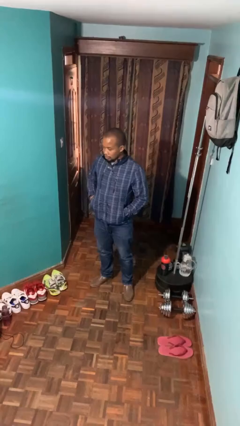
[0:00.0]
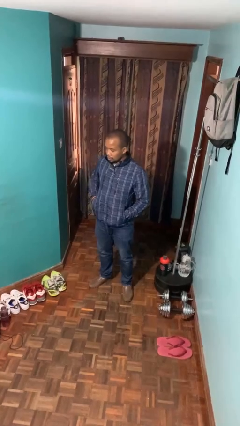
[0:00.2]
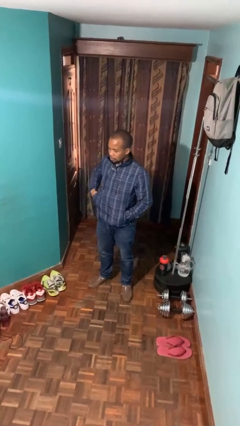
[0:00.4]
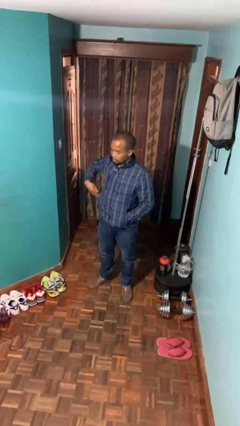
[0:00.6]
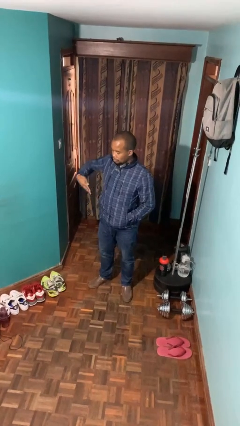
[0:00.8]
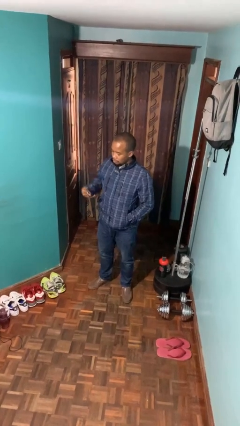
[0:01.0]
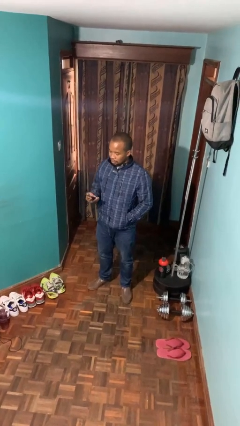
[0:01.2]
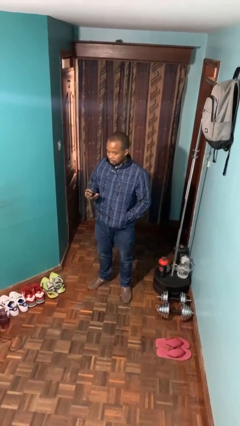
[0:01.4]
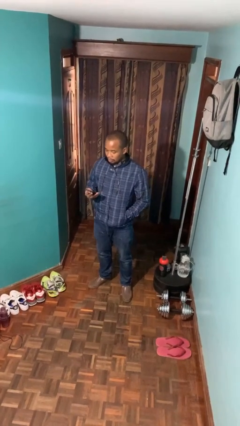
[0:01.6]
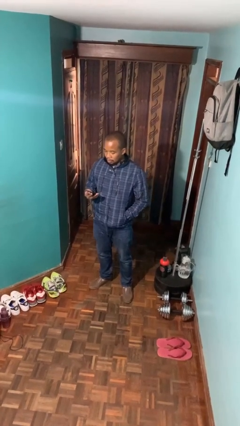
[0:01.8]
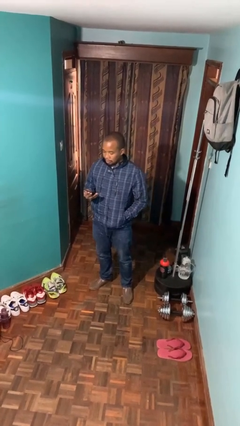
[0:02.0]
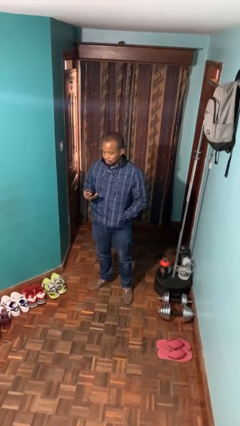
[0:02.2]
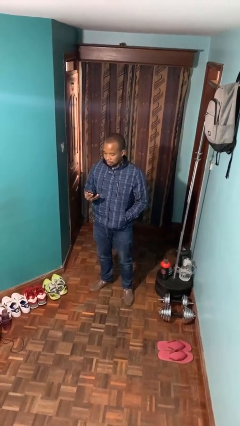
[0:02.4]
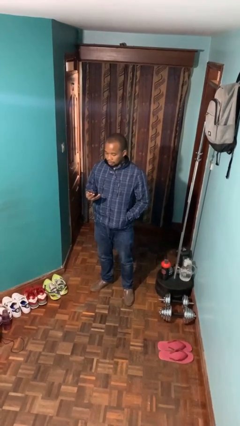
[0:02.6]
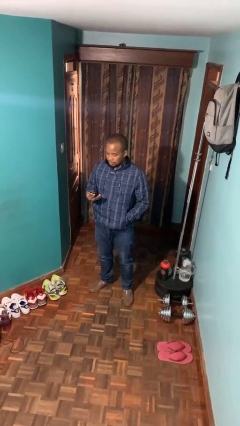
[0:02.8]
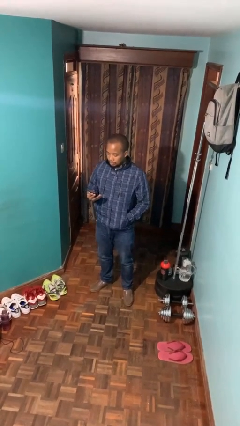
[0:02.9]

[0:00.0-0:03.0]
person takes phone from pocket

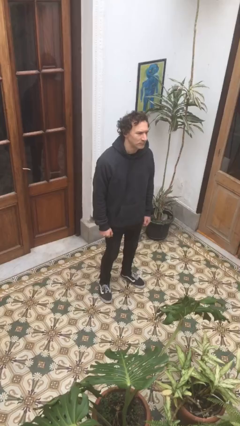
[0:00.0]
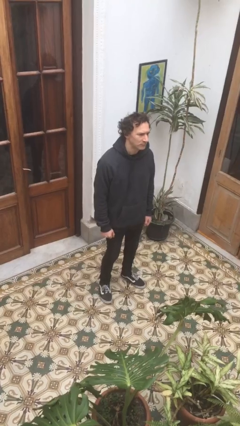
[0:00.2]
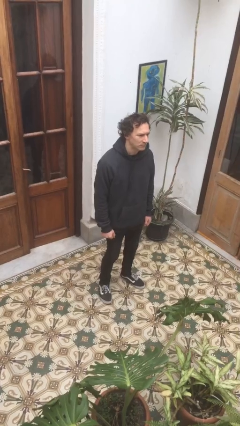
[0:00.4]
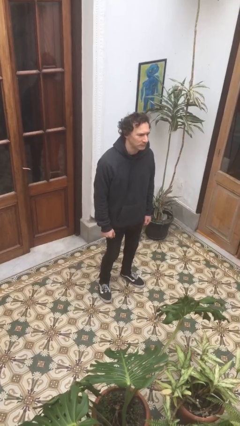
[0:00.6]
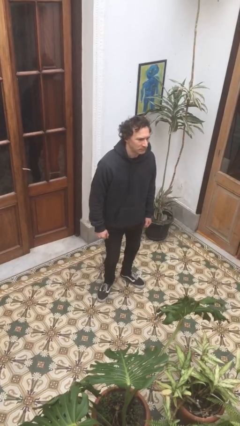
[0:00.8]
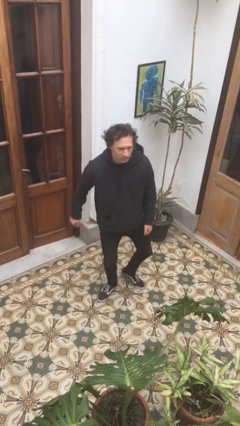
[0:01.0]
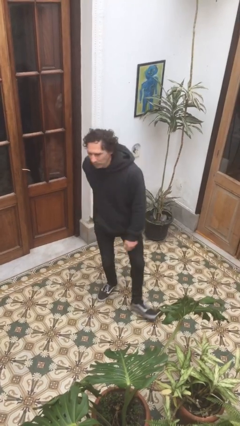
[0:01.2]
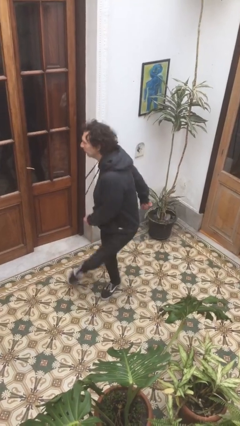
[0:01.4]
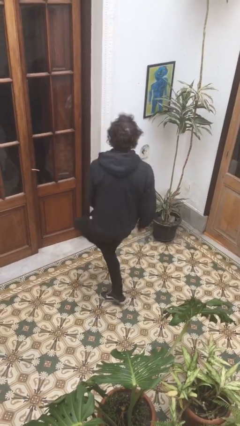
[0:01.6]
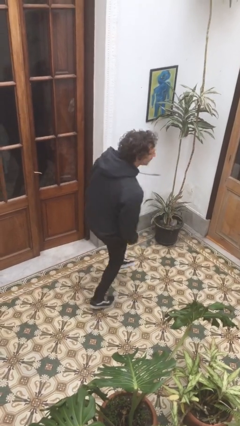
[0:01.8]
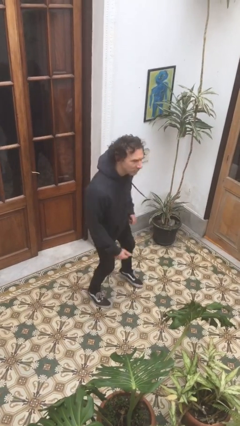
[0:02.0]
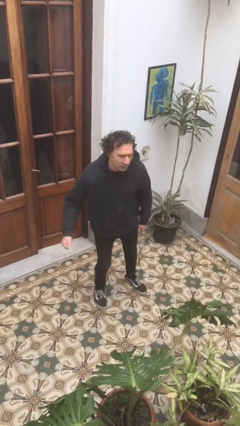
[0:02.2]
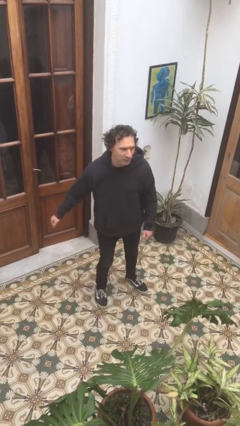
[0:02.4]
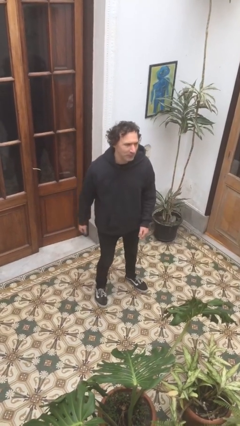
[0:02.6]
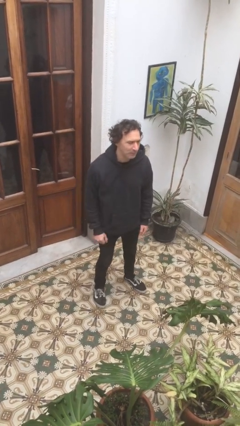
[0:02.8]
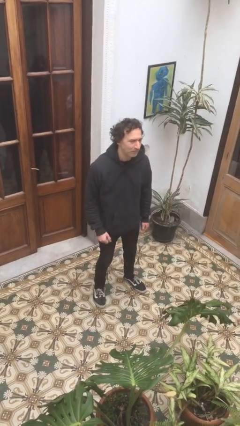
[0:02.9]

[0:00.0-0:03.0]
person twirls

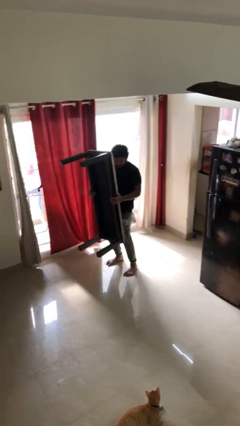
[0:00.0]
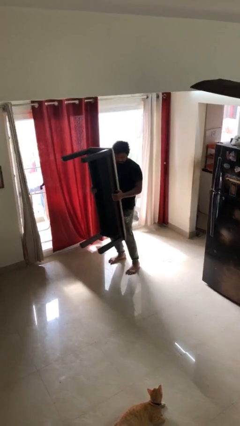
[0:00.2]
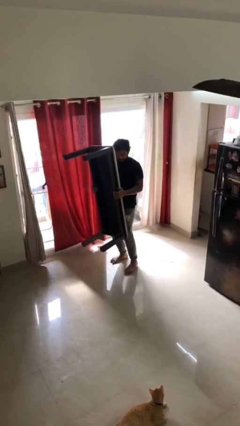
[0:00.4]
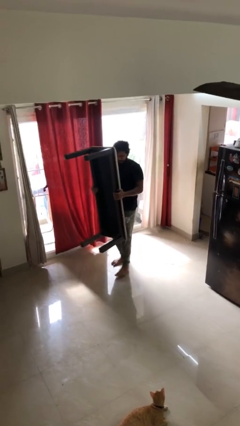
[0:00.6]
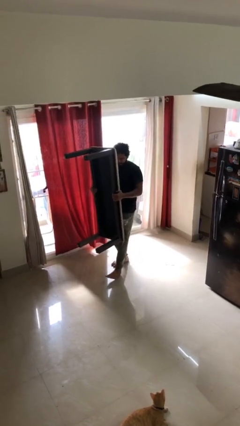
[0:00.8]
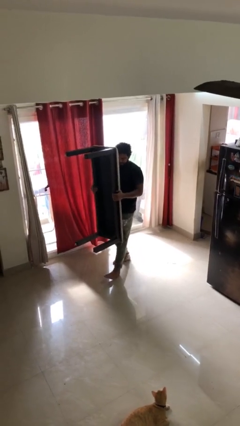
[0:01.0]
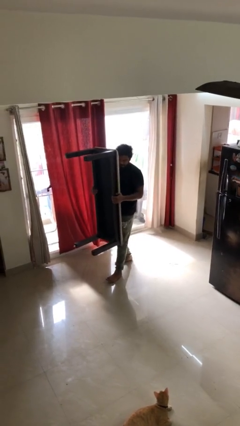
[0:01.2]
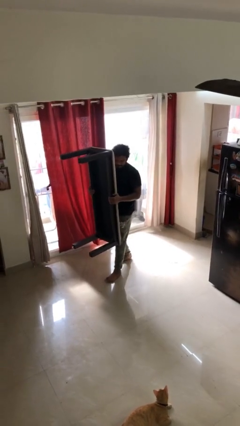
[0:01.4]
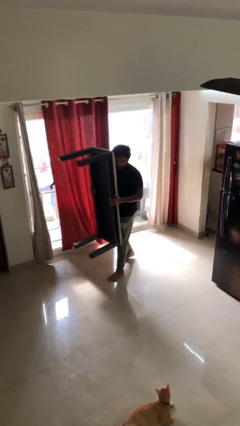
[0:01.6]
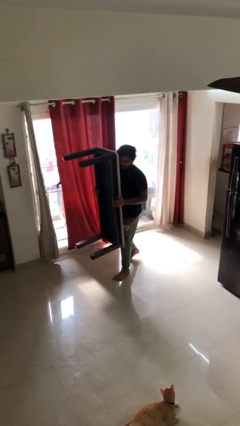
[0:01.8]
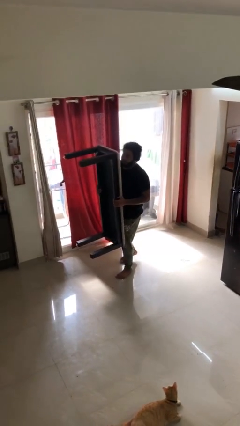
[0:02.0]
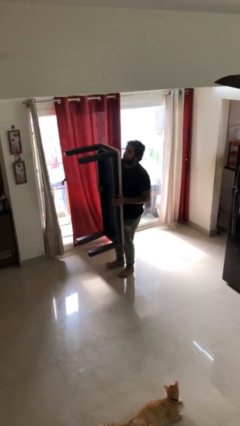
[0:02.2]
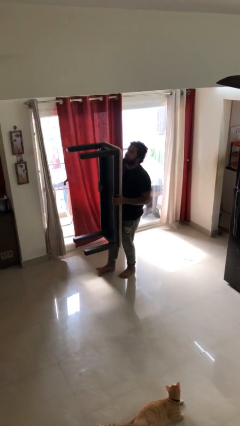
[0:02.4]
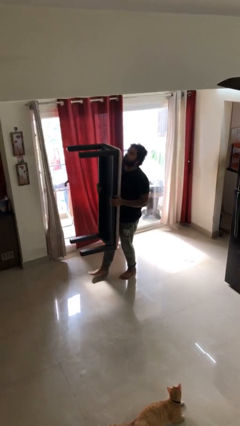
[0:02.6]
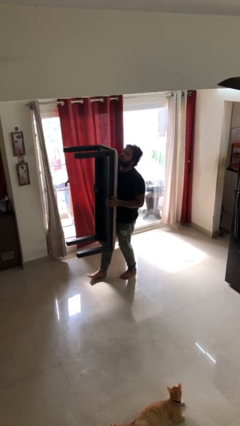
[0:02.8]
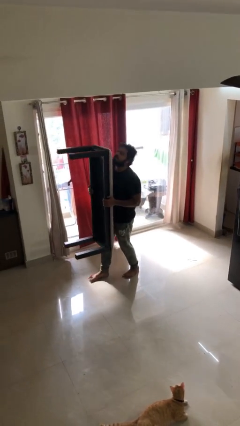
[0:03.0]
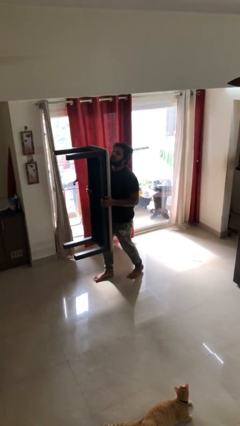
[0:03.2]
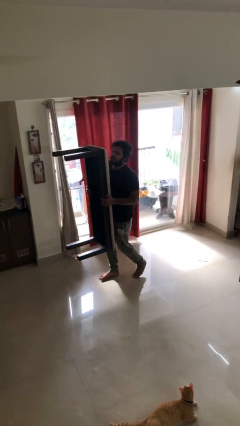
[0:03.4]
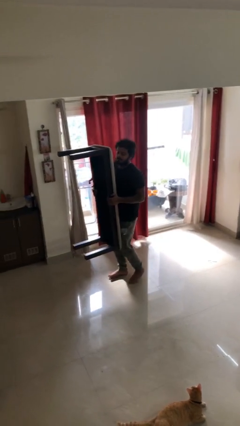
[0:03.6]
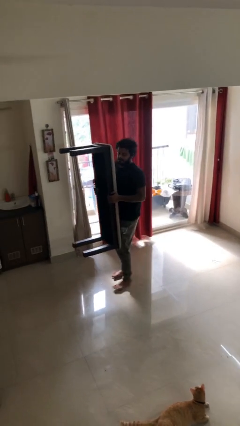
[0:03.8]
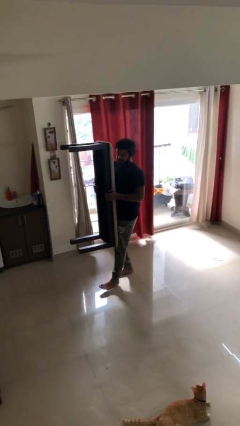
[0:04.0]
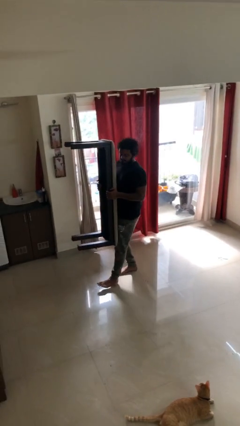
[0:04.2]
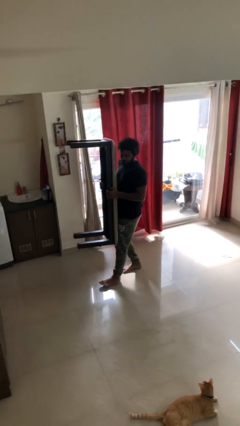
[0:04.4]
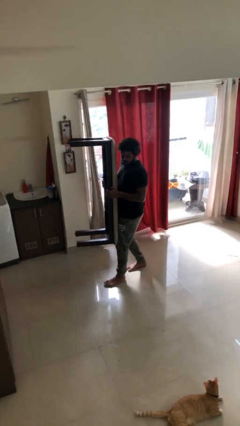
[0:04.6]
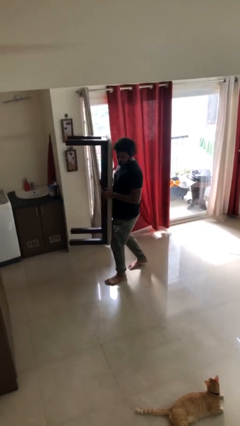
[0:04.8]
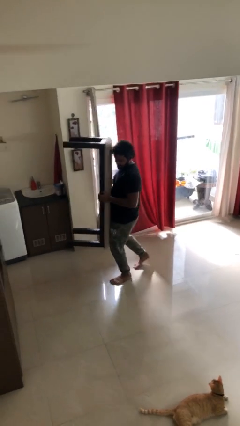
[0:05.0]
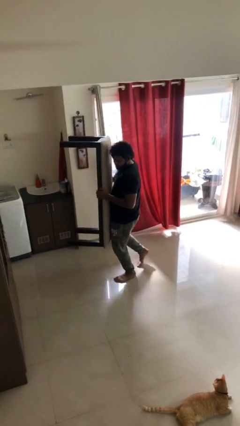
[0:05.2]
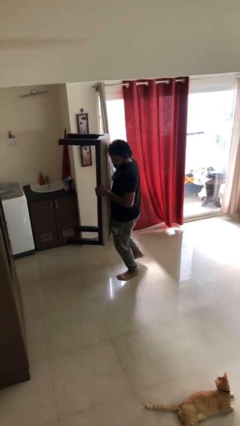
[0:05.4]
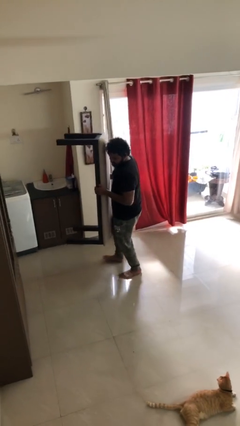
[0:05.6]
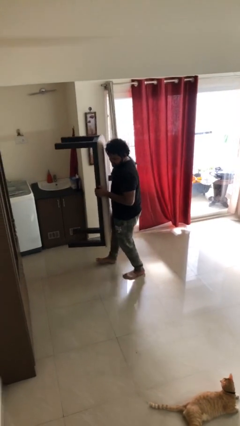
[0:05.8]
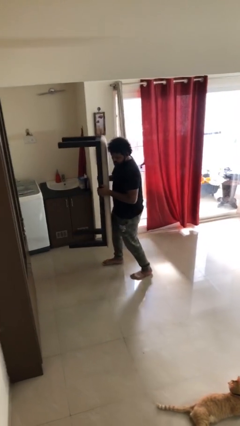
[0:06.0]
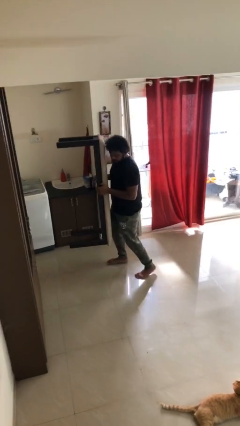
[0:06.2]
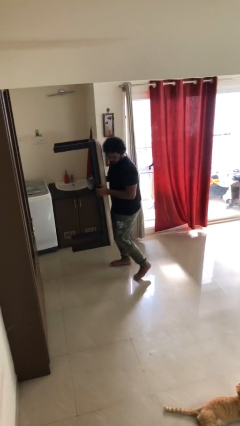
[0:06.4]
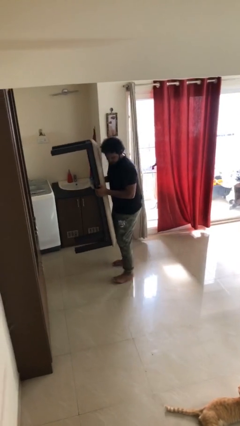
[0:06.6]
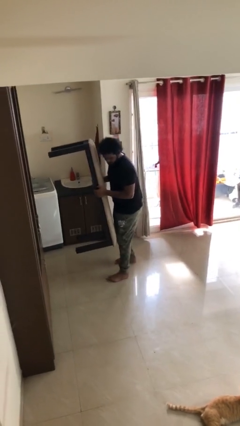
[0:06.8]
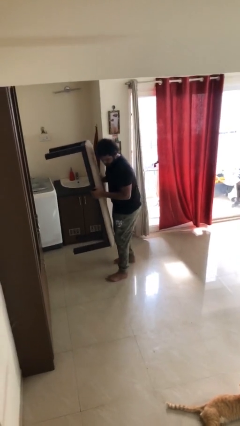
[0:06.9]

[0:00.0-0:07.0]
person carries heavy object

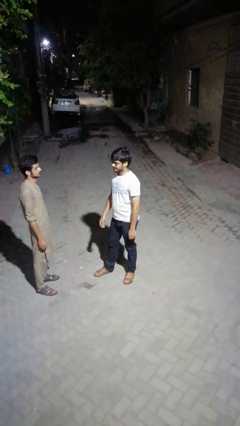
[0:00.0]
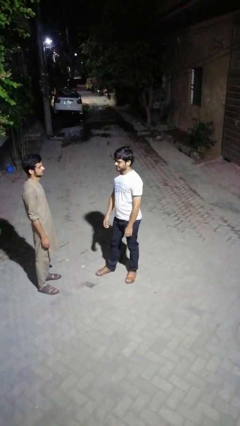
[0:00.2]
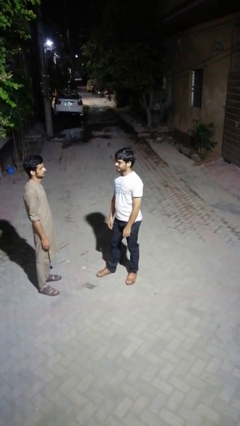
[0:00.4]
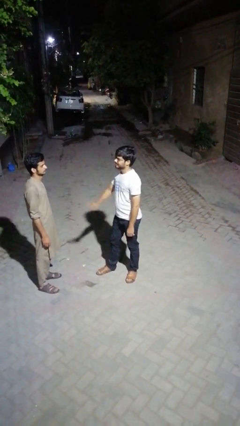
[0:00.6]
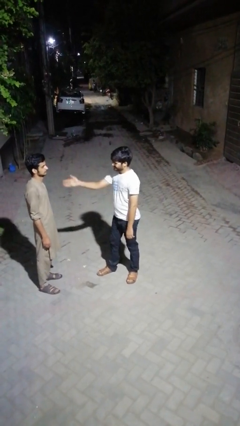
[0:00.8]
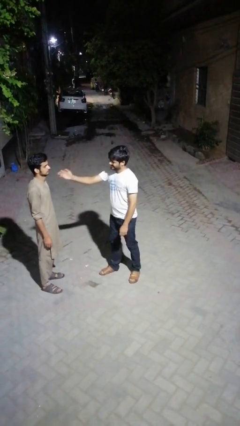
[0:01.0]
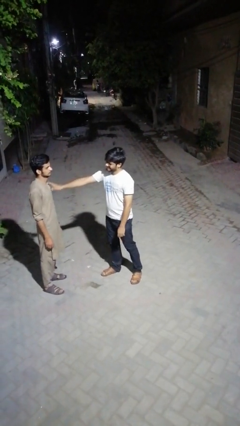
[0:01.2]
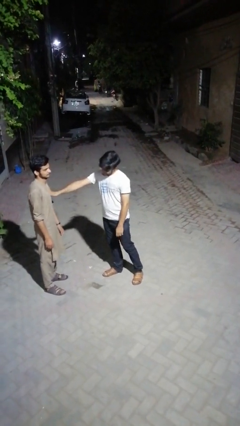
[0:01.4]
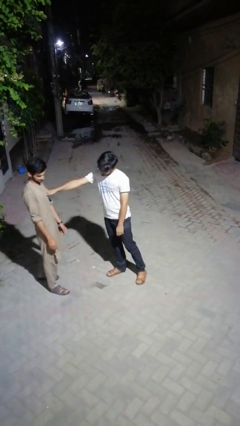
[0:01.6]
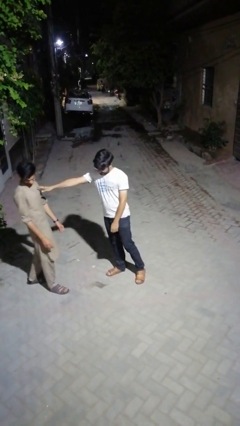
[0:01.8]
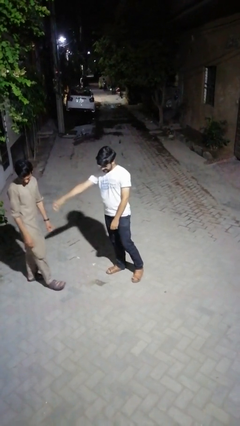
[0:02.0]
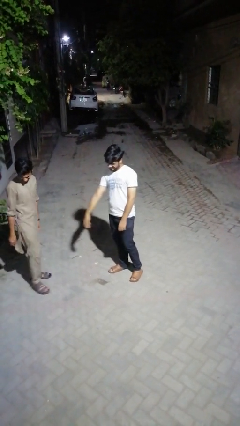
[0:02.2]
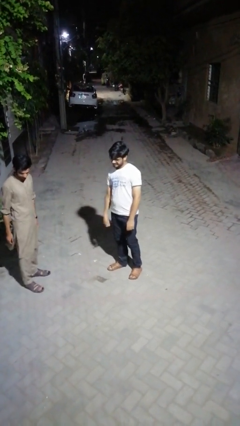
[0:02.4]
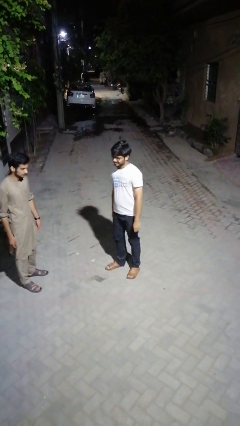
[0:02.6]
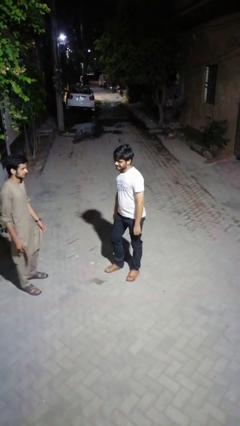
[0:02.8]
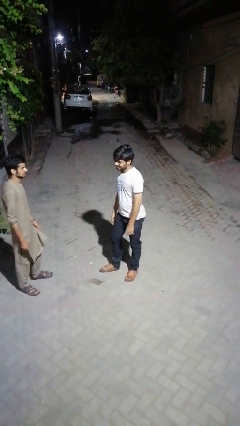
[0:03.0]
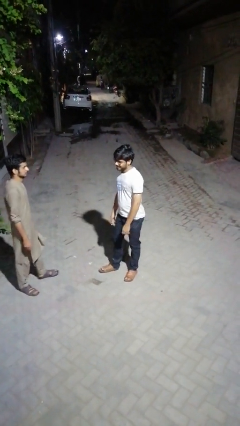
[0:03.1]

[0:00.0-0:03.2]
person shoves person

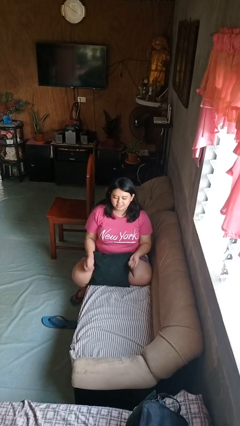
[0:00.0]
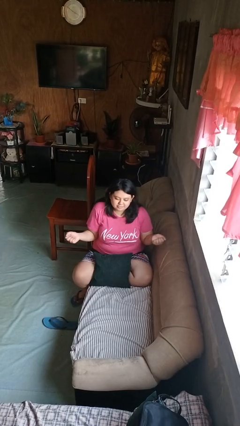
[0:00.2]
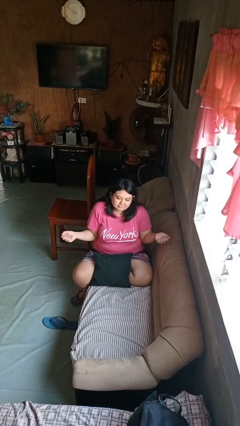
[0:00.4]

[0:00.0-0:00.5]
person shrugs

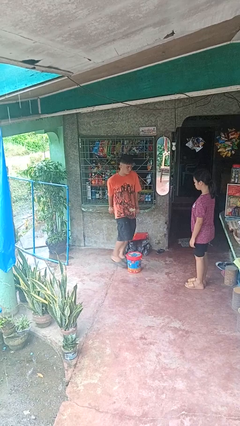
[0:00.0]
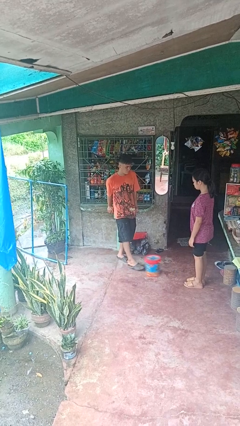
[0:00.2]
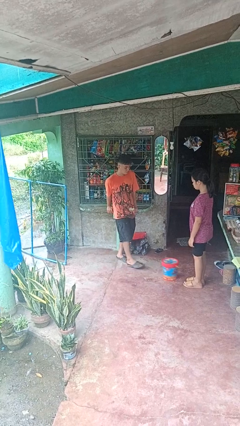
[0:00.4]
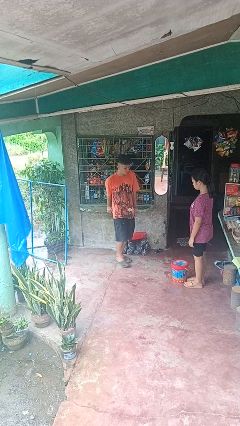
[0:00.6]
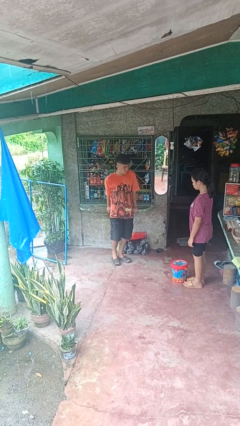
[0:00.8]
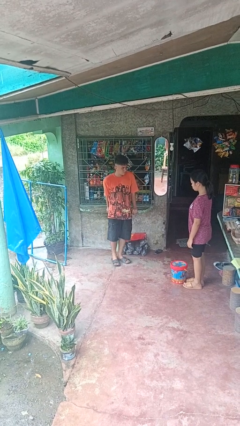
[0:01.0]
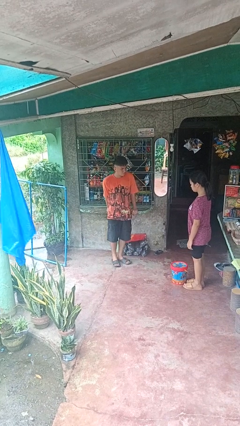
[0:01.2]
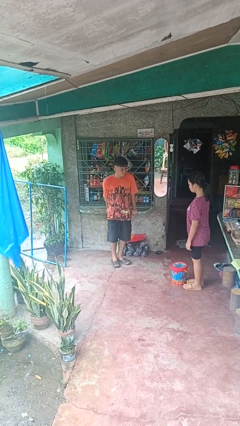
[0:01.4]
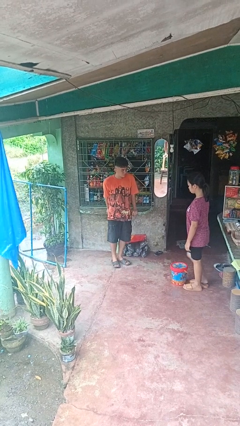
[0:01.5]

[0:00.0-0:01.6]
person kicks object to person
